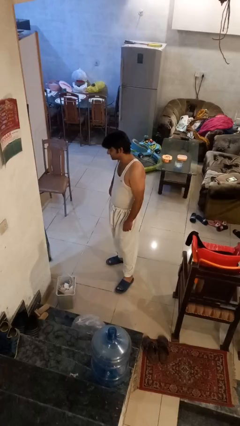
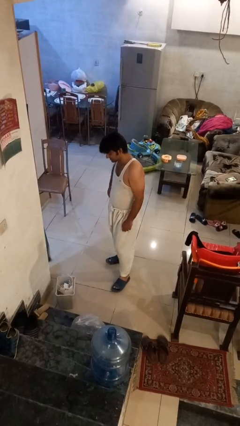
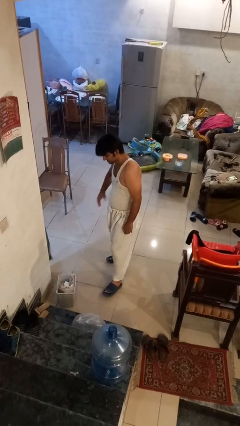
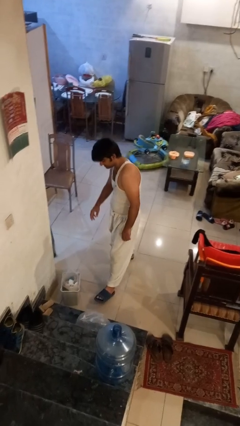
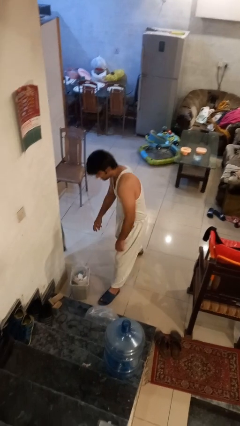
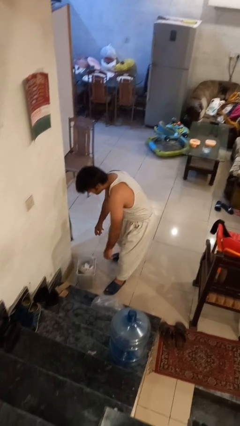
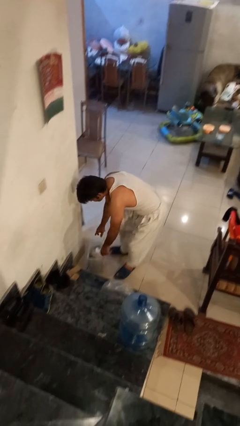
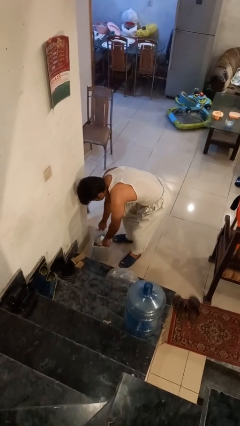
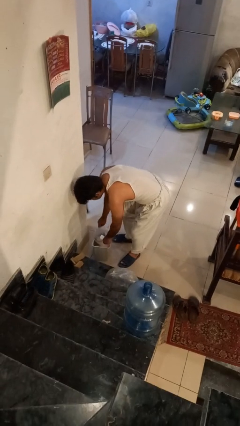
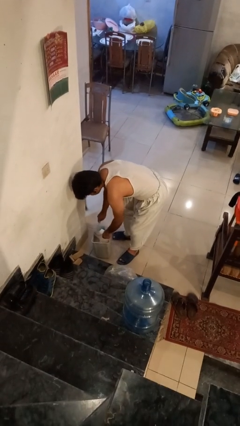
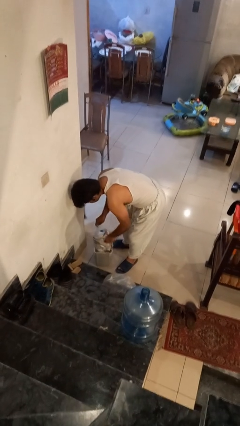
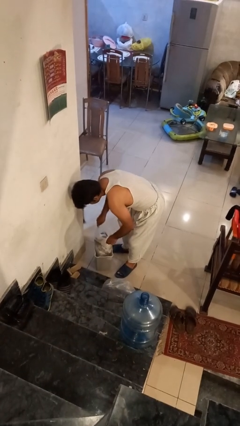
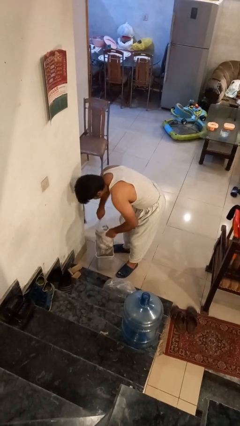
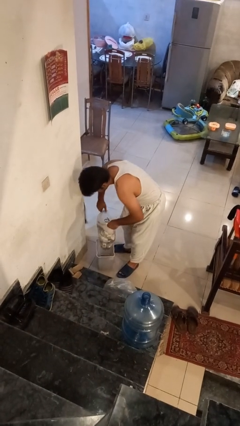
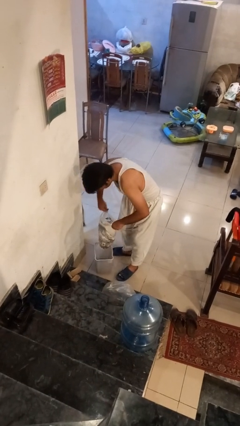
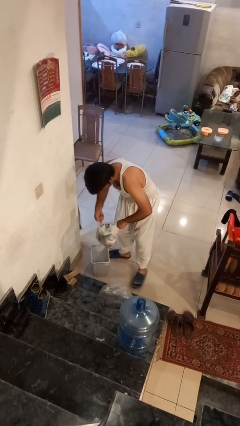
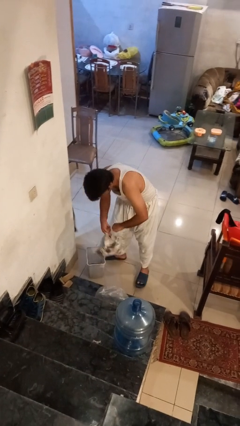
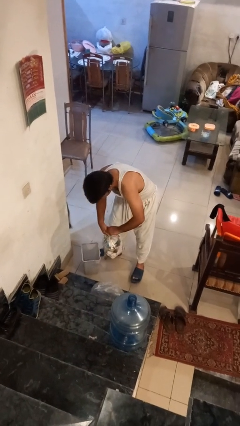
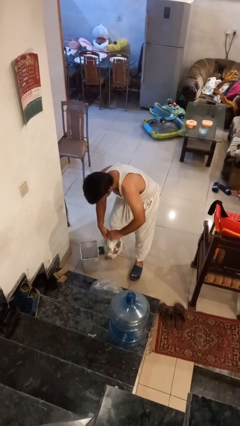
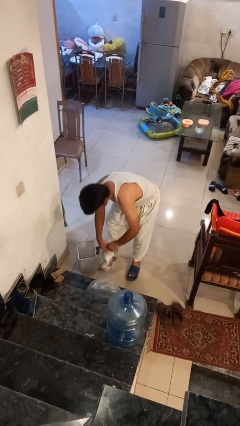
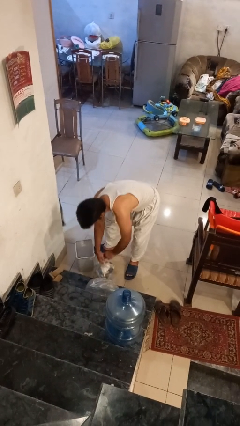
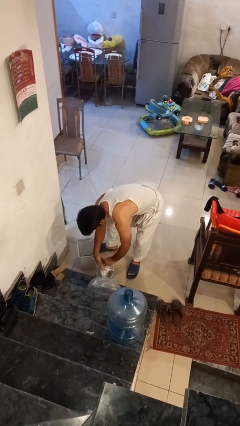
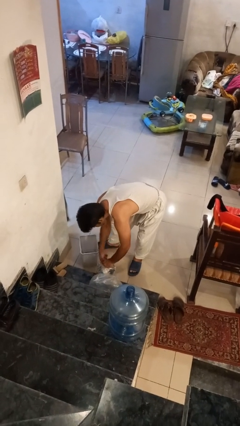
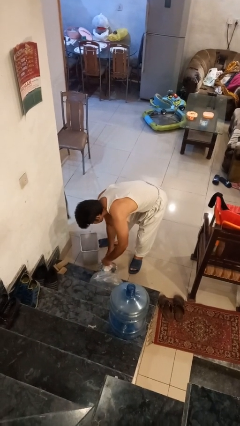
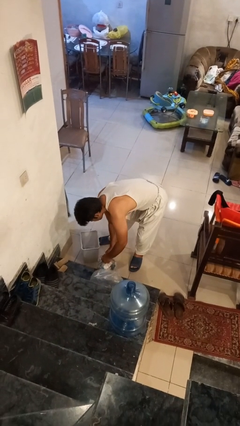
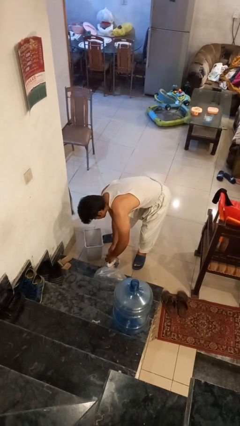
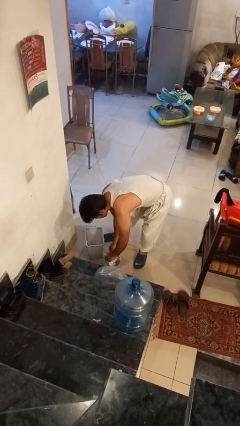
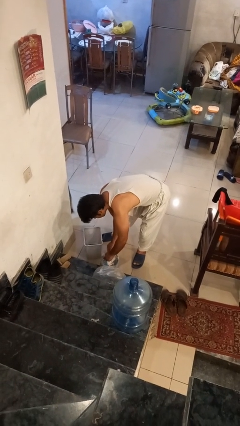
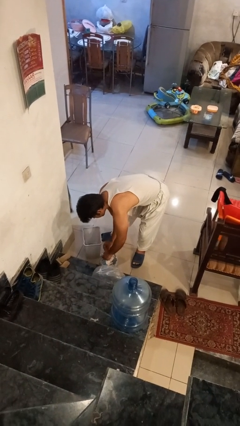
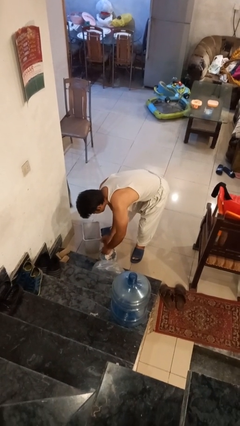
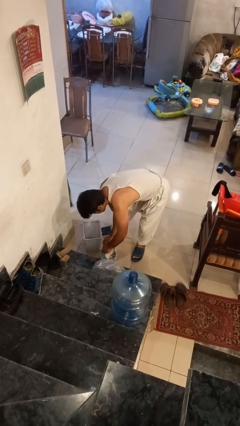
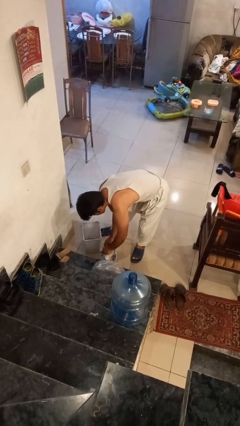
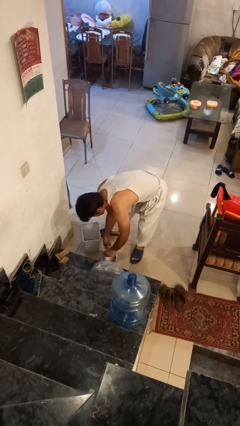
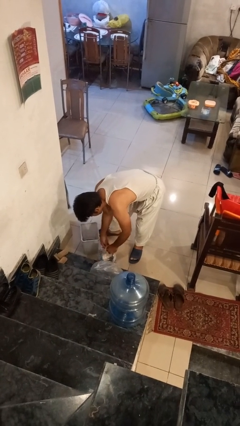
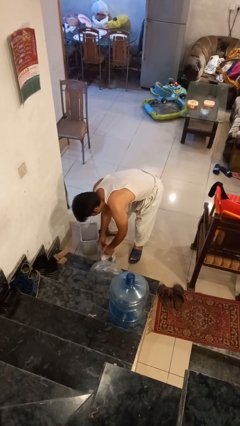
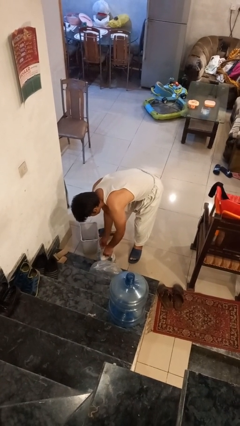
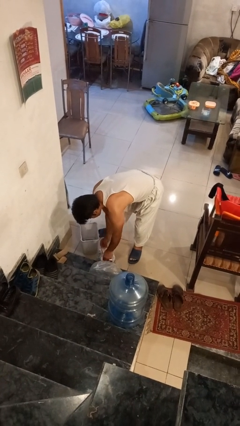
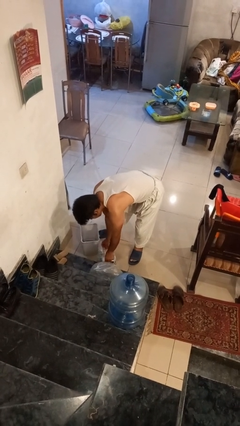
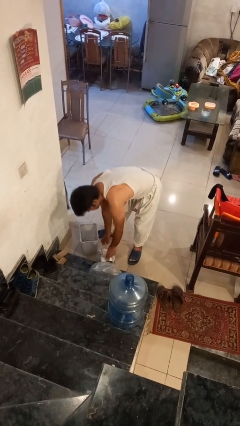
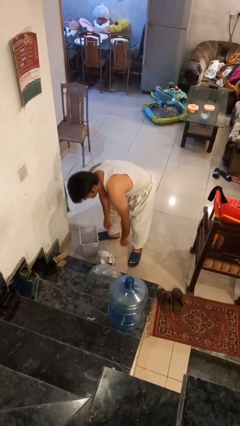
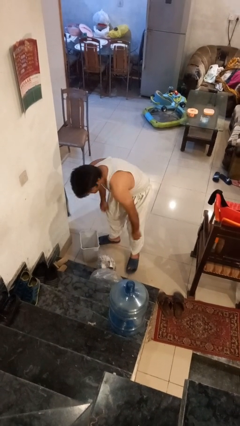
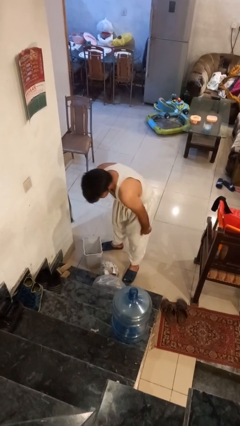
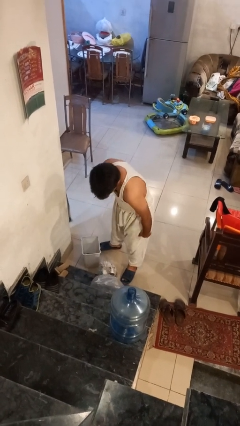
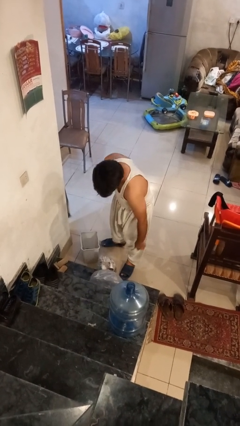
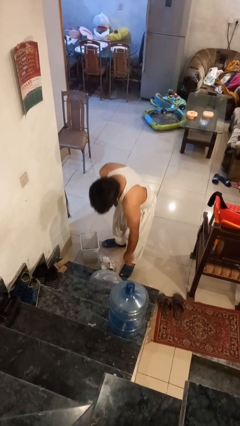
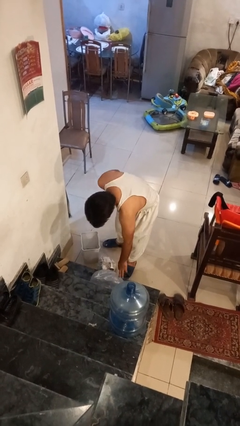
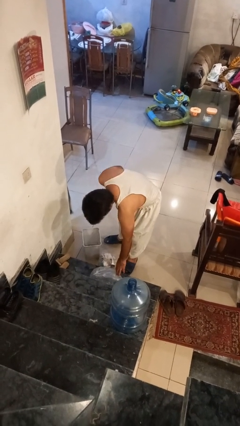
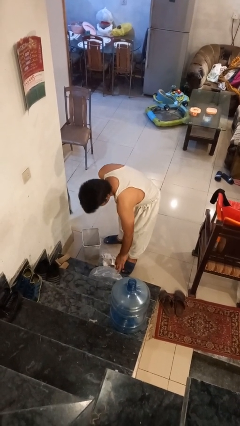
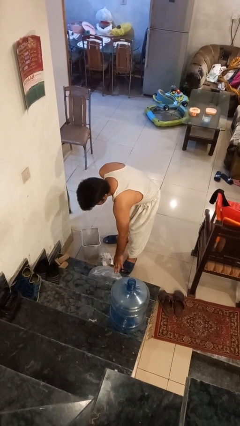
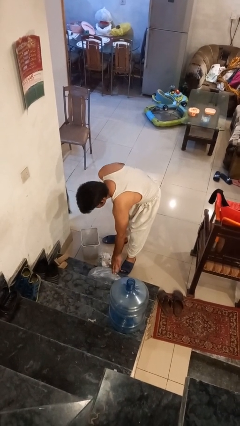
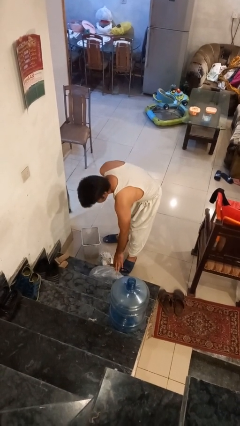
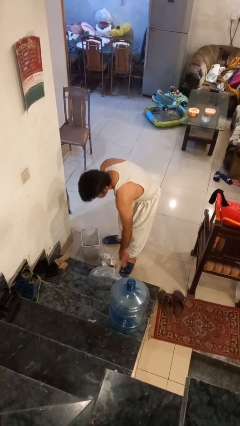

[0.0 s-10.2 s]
person removes trashbag from trashcan

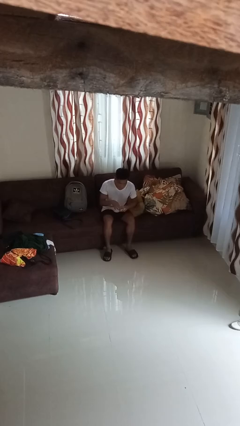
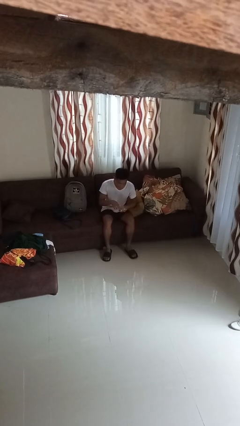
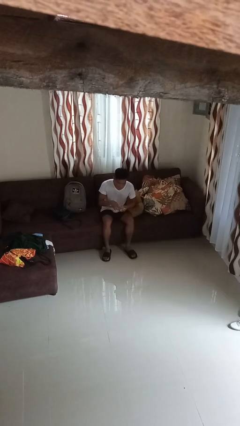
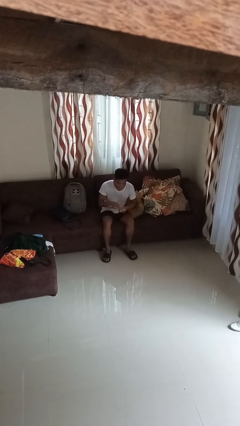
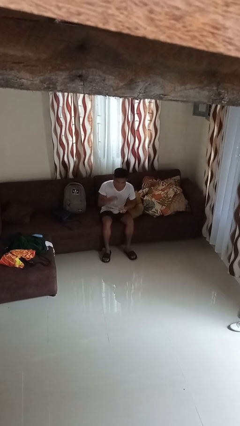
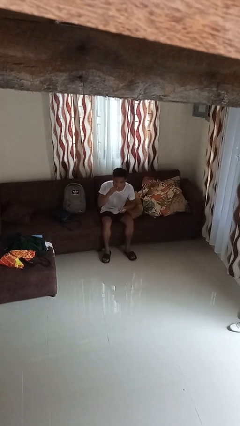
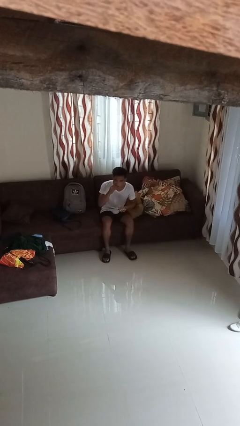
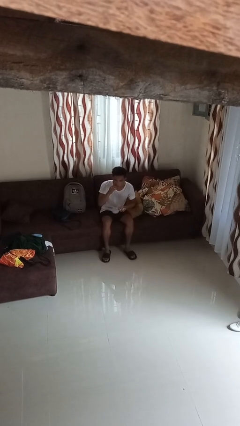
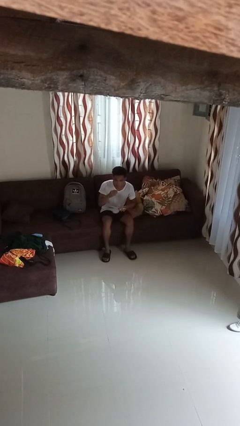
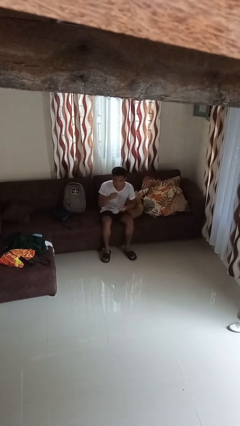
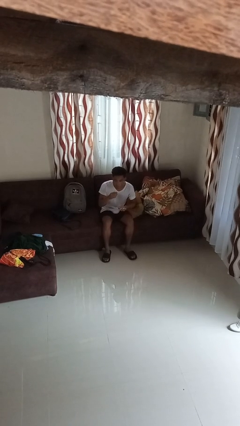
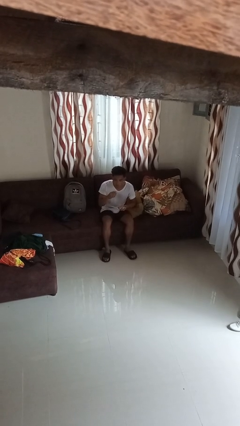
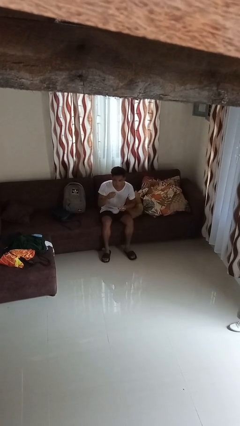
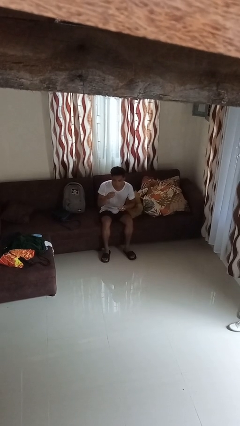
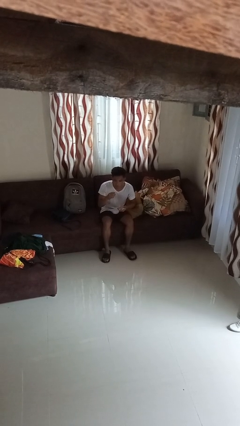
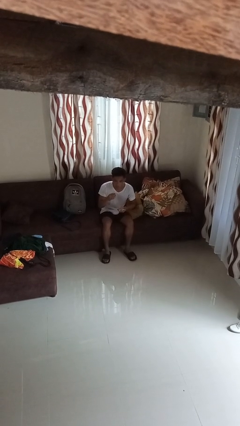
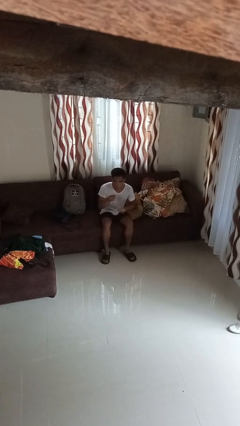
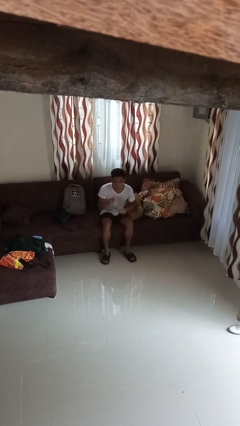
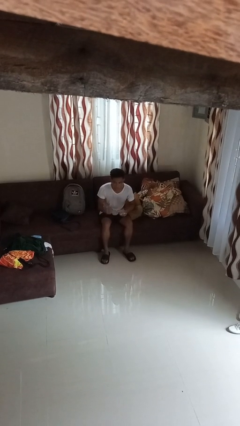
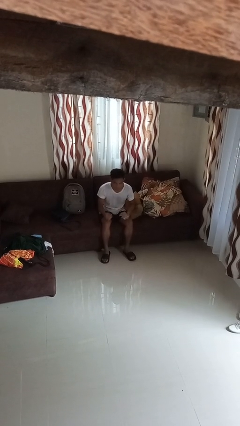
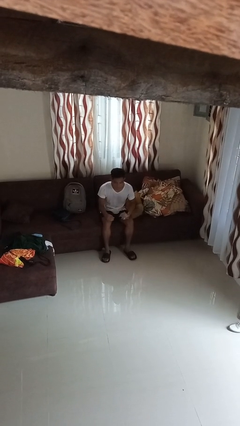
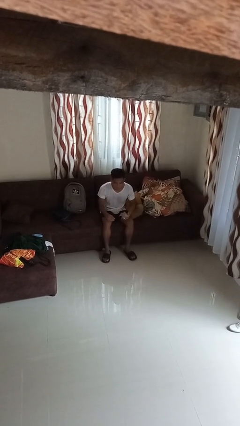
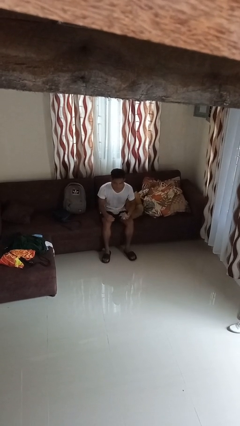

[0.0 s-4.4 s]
person eats snack from bag

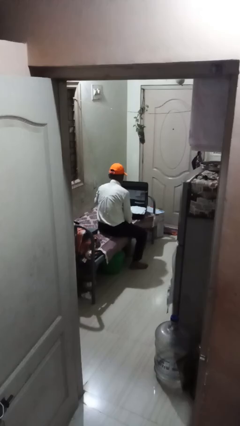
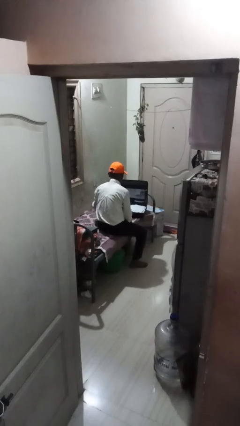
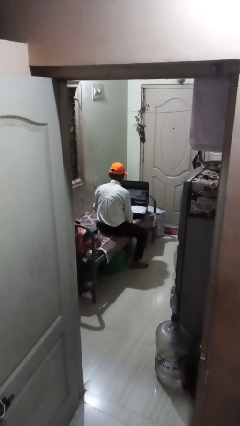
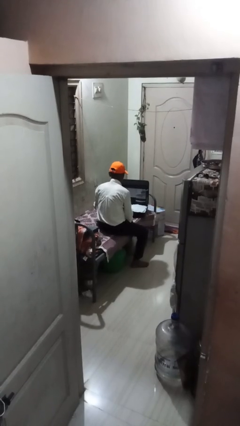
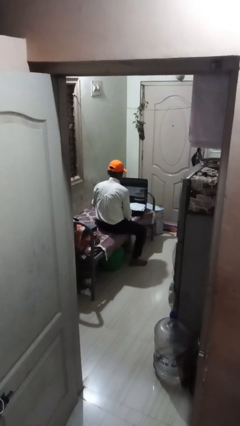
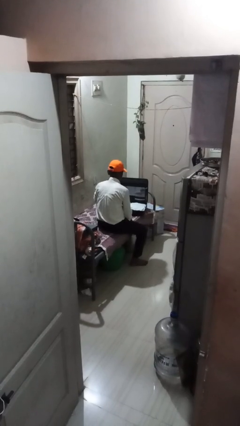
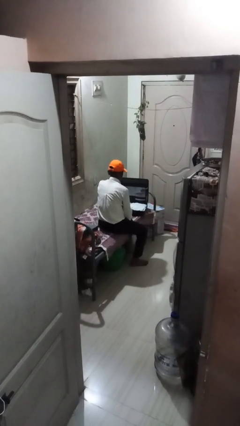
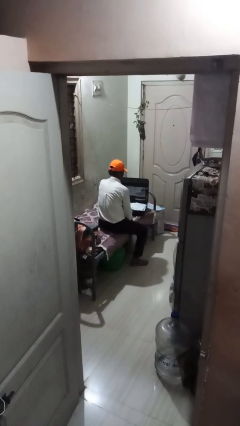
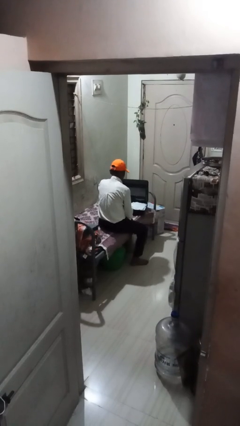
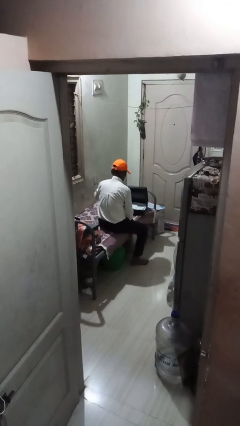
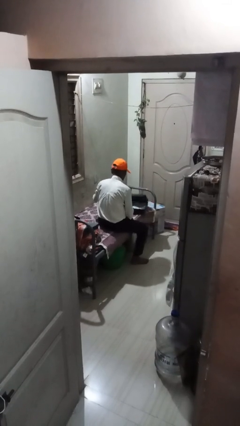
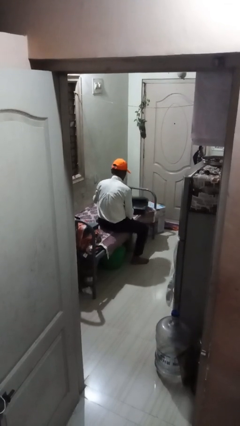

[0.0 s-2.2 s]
person closes suitcase

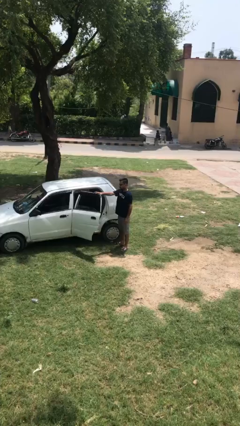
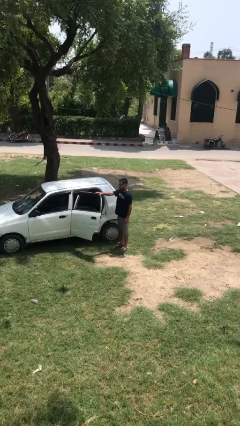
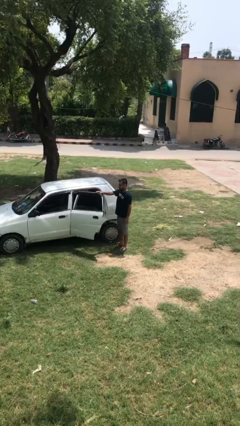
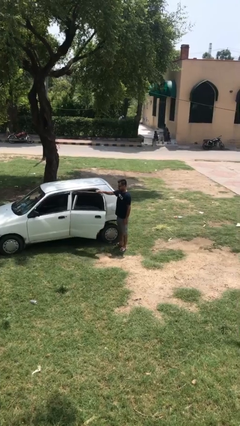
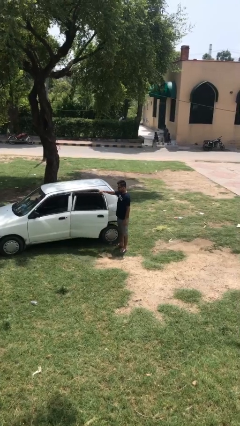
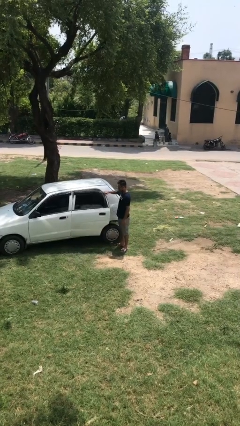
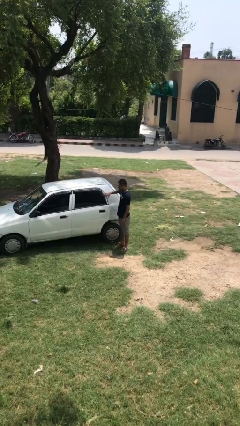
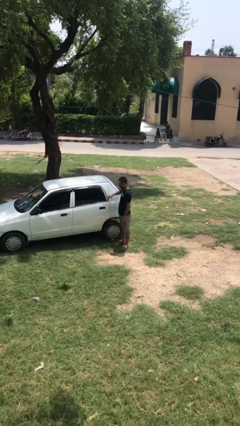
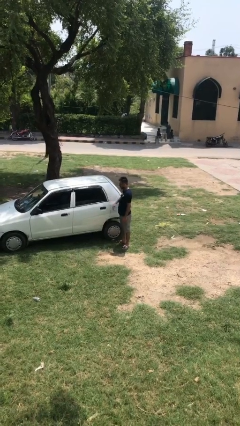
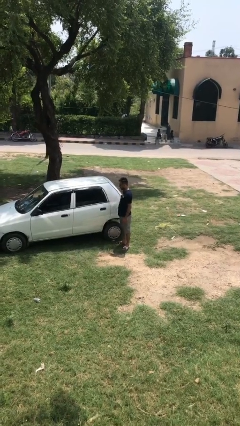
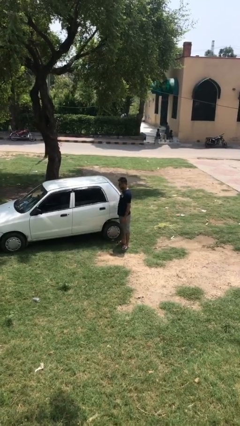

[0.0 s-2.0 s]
person closes car door
